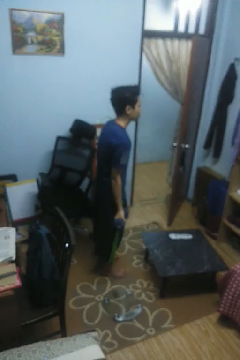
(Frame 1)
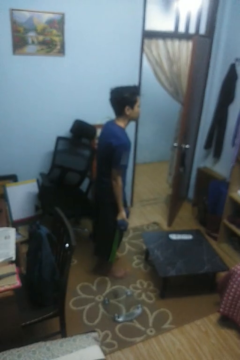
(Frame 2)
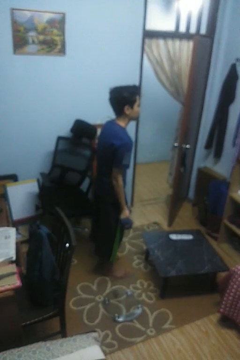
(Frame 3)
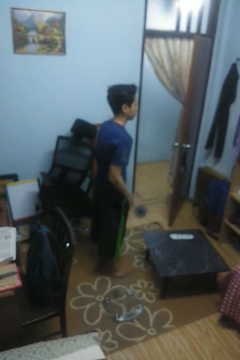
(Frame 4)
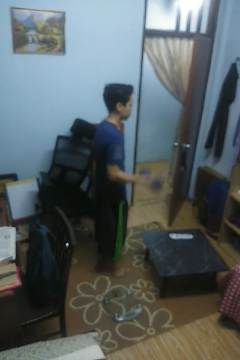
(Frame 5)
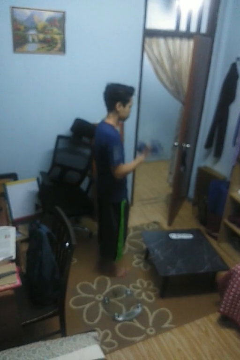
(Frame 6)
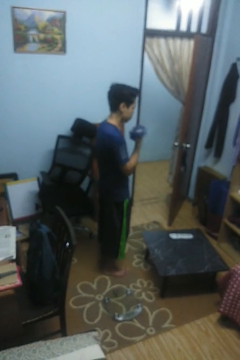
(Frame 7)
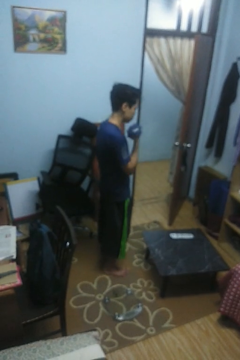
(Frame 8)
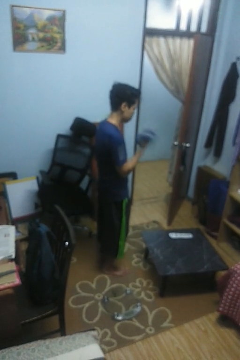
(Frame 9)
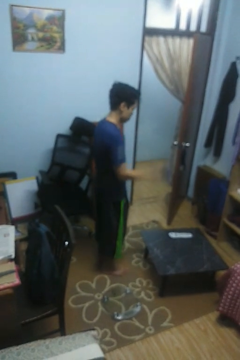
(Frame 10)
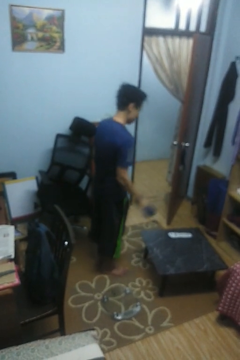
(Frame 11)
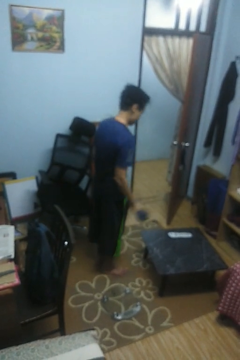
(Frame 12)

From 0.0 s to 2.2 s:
person lifts dumbbells

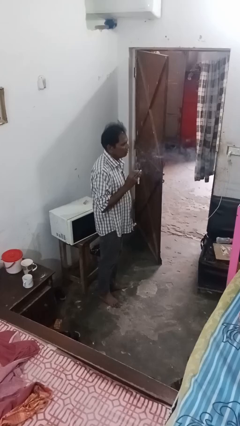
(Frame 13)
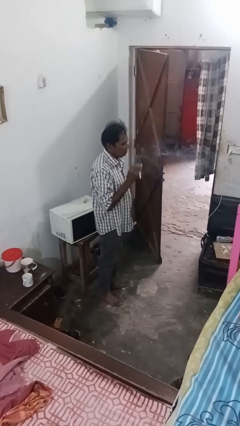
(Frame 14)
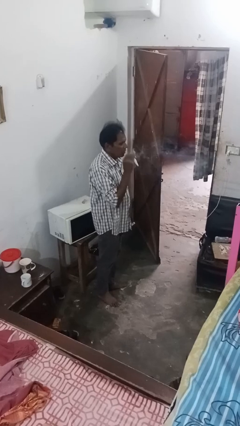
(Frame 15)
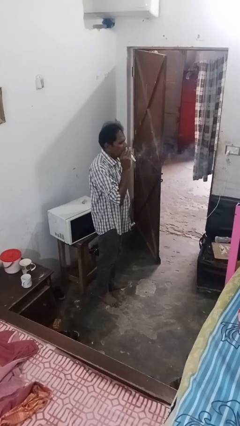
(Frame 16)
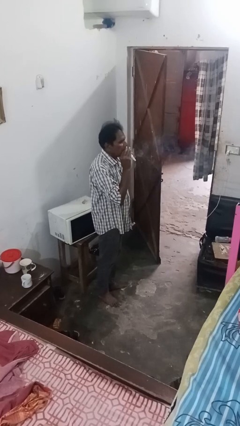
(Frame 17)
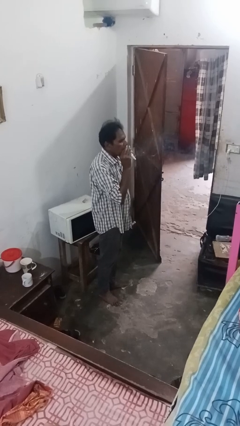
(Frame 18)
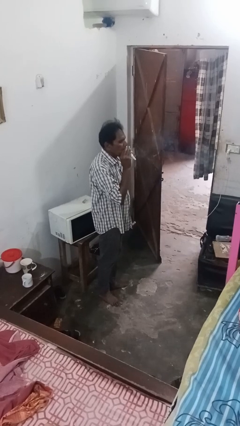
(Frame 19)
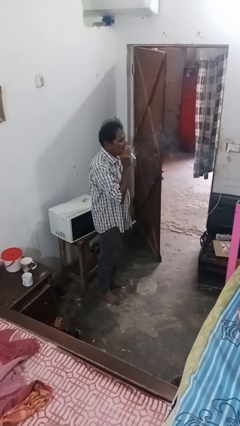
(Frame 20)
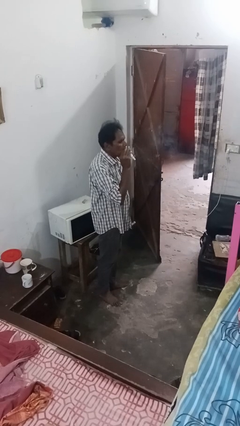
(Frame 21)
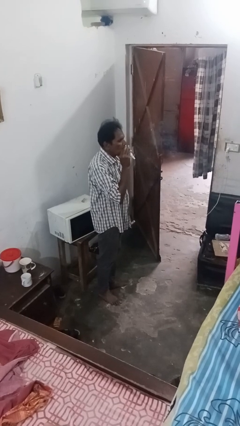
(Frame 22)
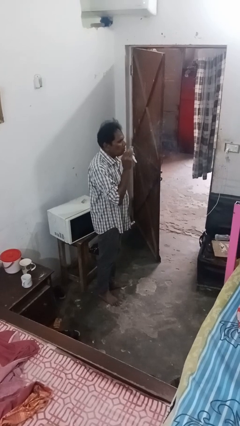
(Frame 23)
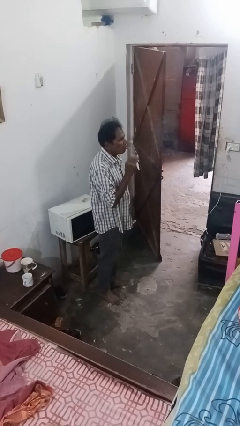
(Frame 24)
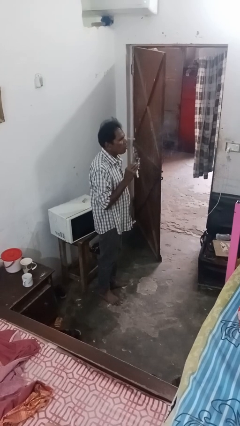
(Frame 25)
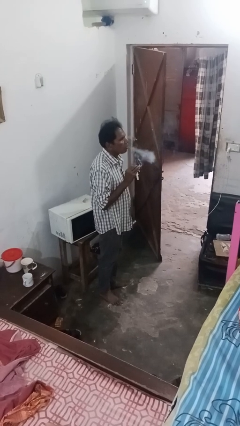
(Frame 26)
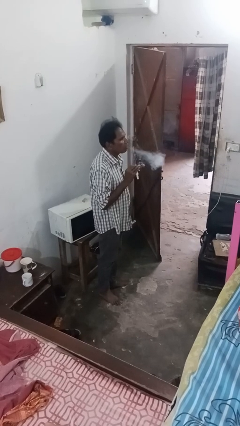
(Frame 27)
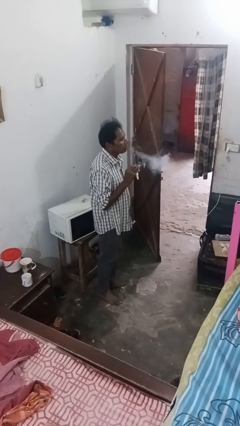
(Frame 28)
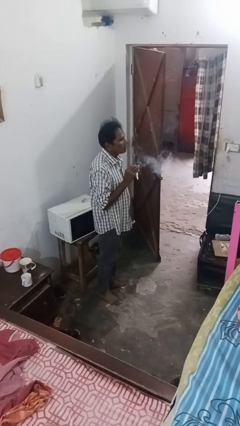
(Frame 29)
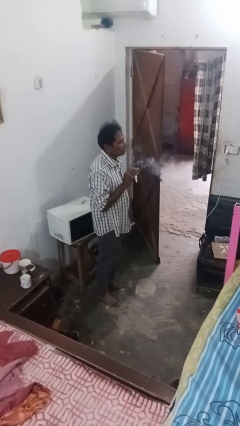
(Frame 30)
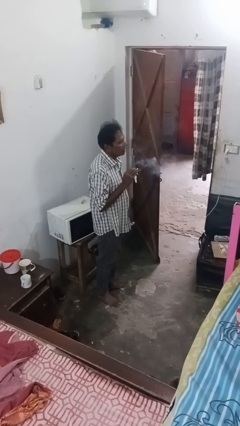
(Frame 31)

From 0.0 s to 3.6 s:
person vapes

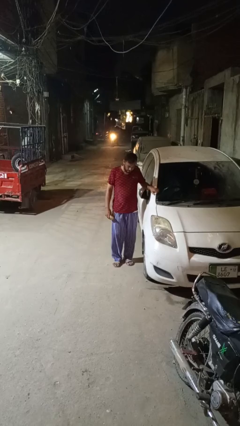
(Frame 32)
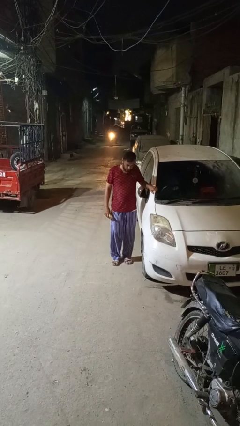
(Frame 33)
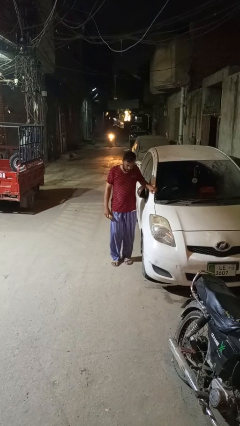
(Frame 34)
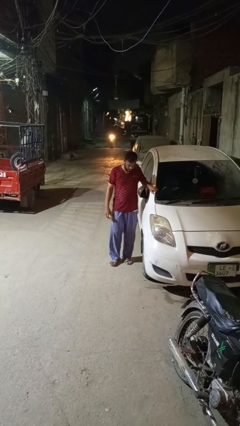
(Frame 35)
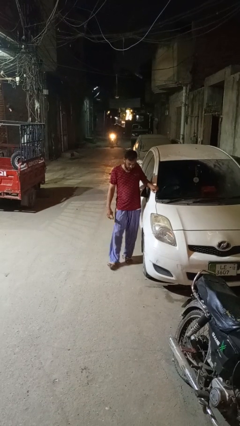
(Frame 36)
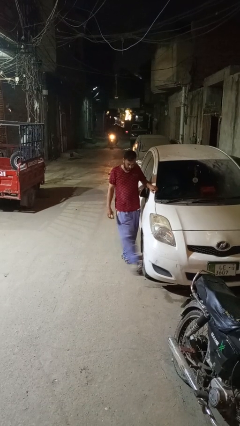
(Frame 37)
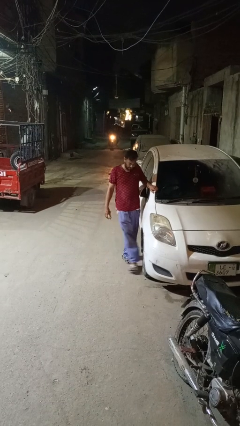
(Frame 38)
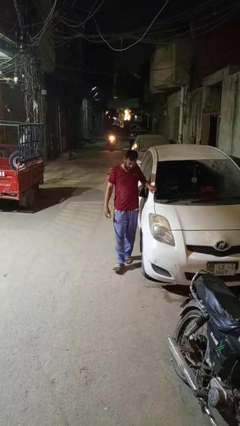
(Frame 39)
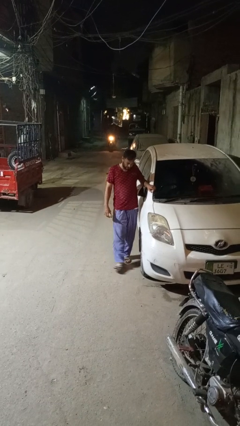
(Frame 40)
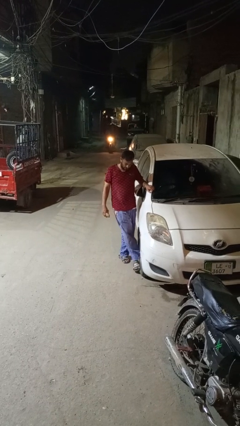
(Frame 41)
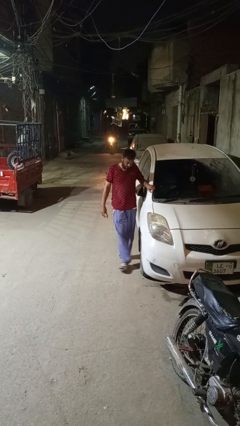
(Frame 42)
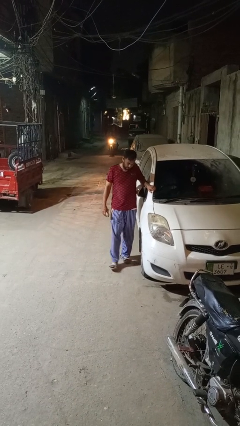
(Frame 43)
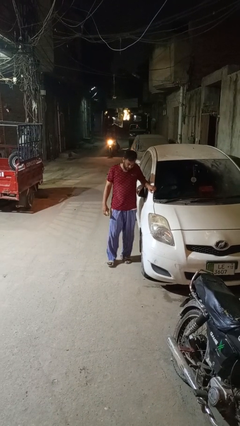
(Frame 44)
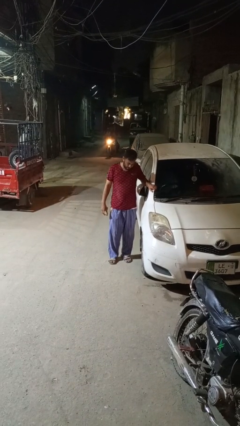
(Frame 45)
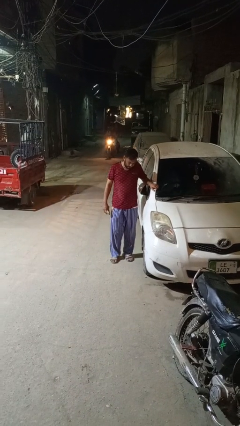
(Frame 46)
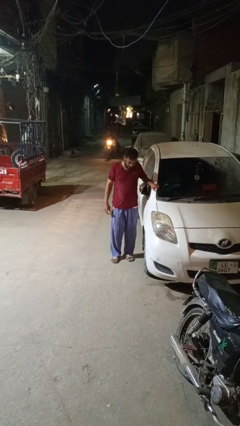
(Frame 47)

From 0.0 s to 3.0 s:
person kicks car tires

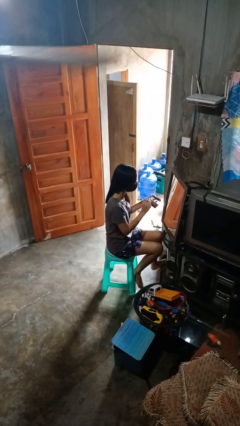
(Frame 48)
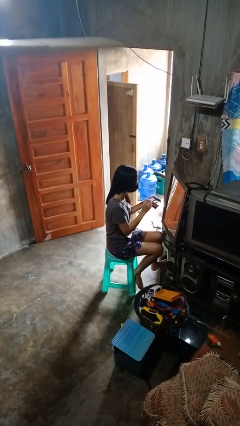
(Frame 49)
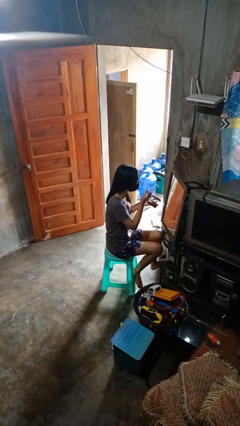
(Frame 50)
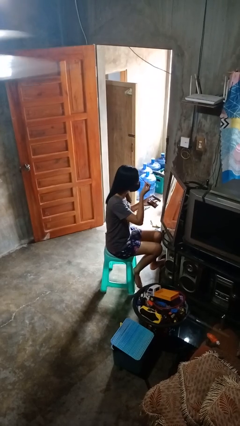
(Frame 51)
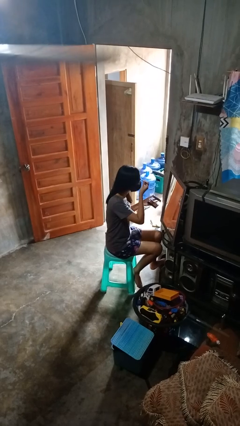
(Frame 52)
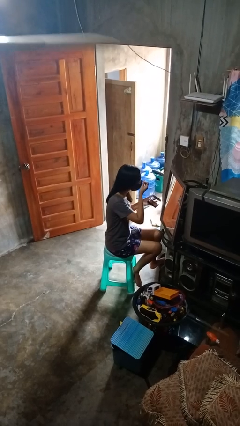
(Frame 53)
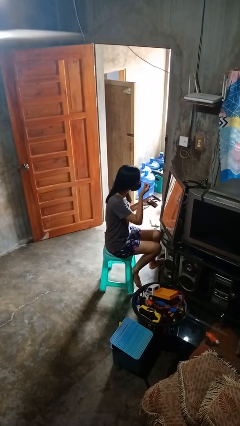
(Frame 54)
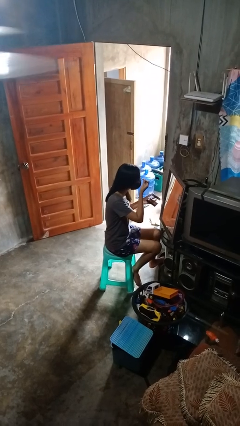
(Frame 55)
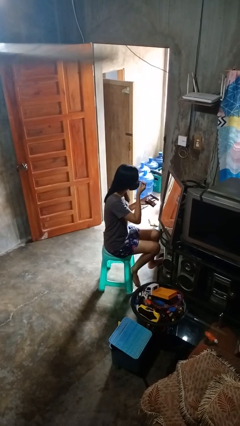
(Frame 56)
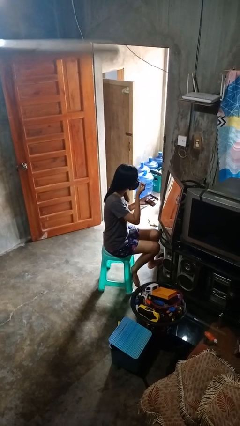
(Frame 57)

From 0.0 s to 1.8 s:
person applies eye makeup

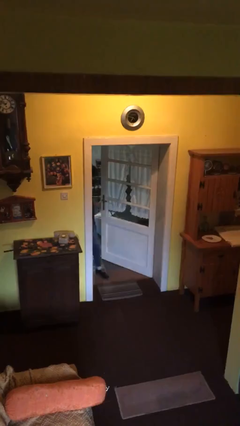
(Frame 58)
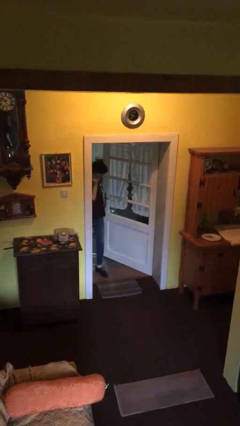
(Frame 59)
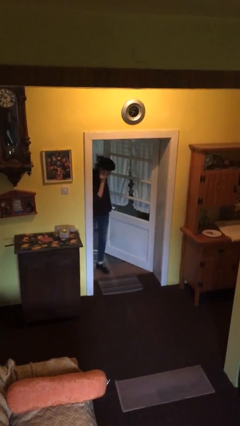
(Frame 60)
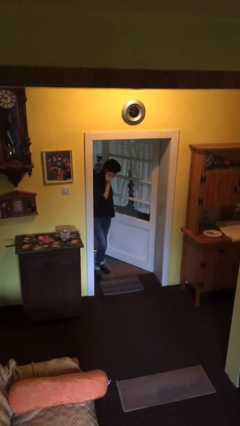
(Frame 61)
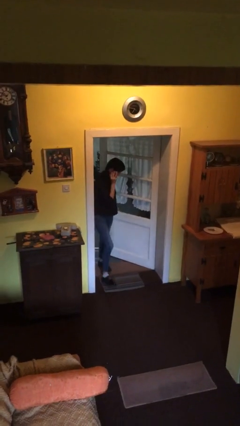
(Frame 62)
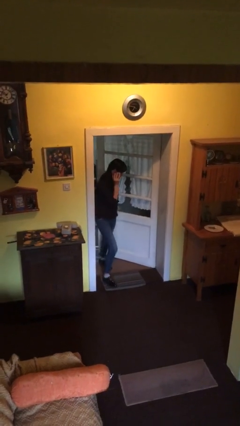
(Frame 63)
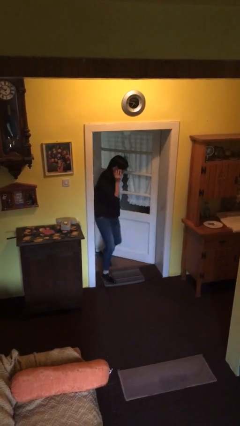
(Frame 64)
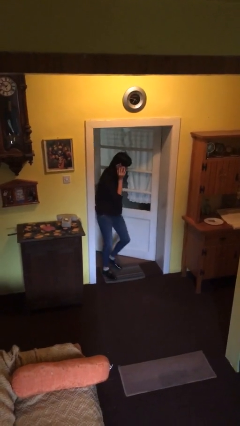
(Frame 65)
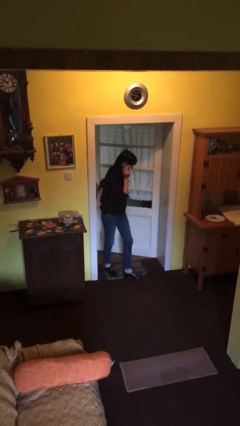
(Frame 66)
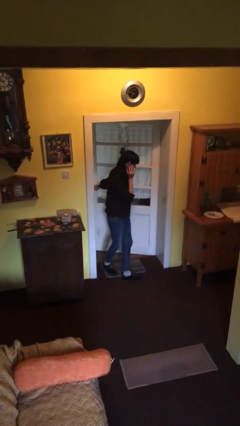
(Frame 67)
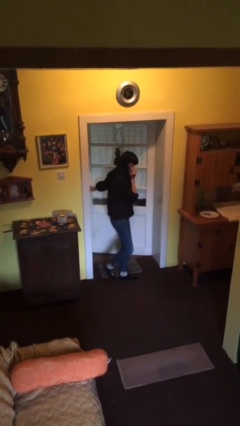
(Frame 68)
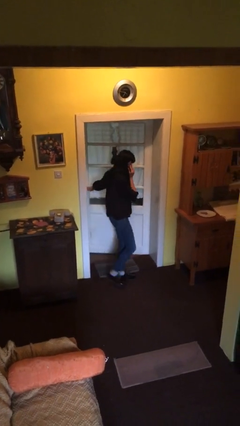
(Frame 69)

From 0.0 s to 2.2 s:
person enters scene through structure

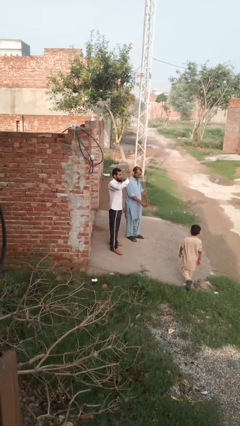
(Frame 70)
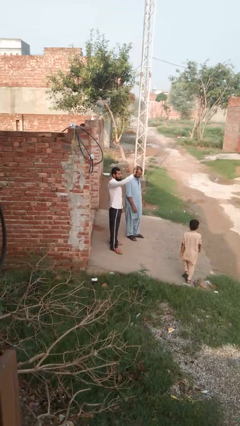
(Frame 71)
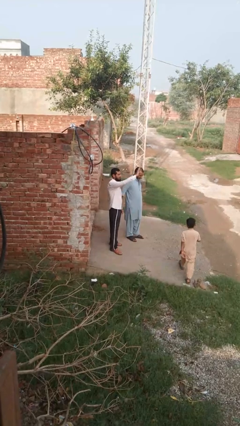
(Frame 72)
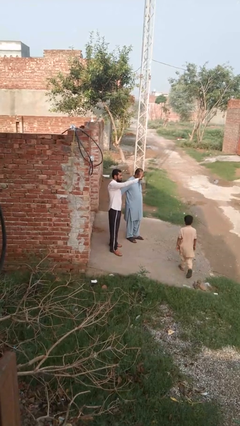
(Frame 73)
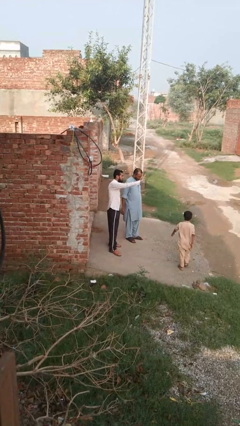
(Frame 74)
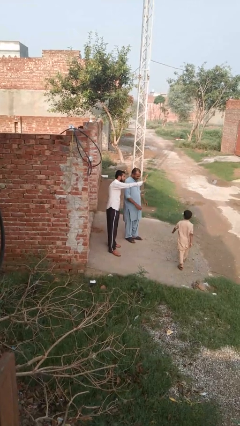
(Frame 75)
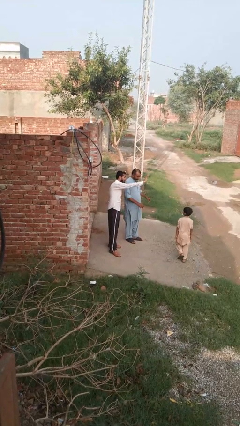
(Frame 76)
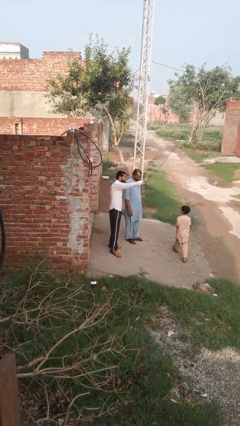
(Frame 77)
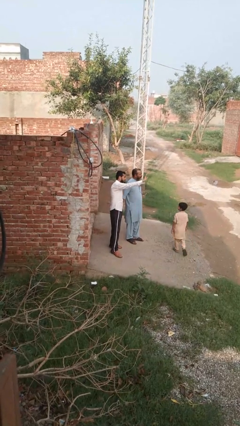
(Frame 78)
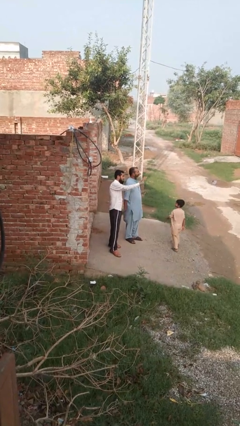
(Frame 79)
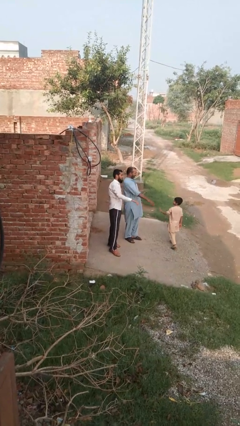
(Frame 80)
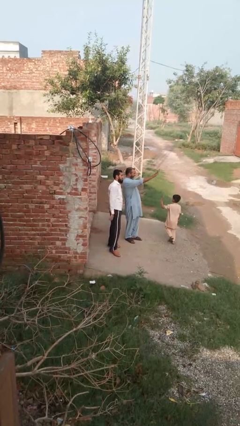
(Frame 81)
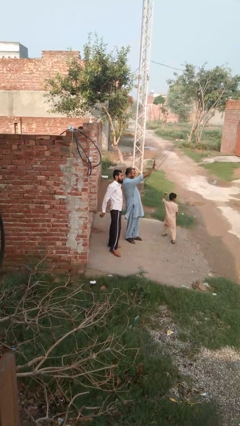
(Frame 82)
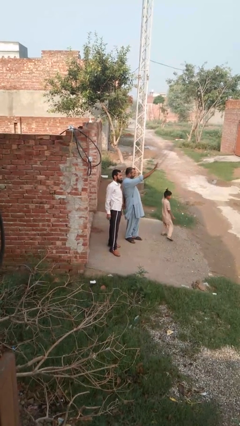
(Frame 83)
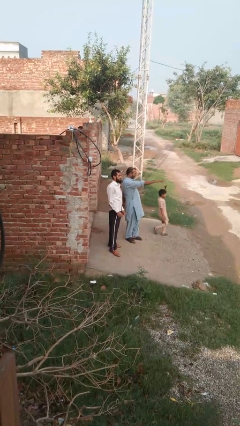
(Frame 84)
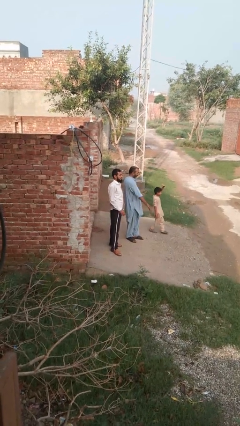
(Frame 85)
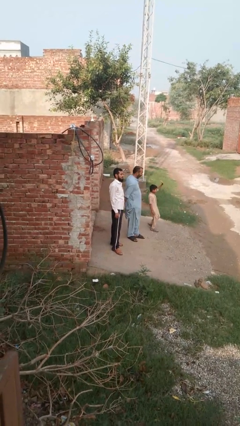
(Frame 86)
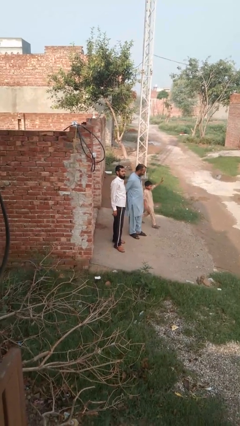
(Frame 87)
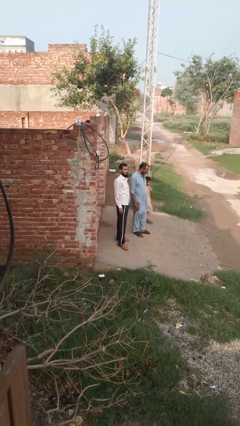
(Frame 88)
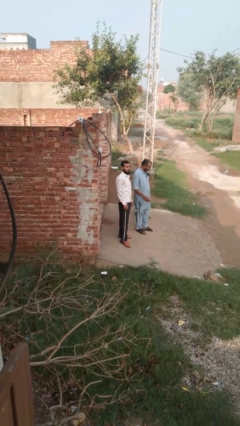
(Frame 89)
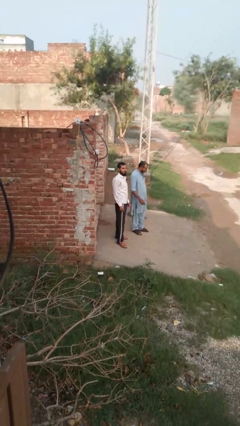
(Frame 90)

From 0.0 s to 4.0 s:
person waves at person

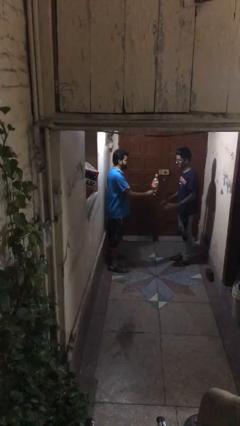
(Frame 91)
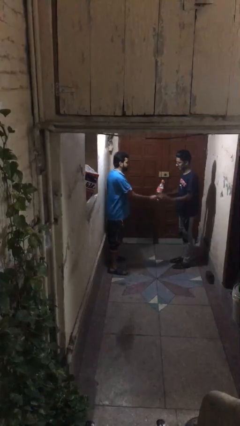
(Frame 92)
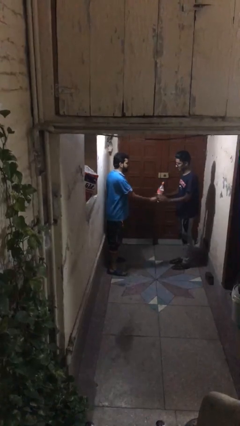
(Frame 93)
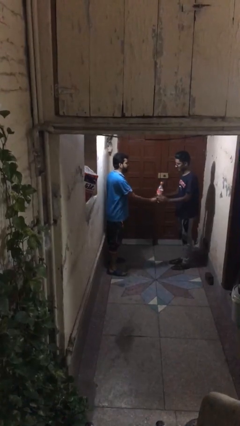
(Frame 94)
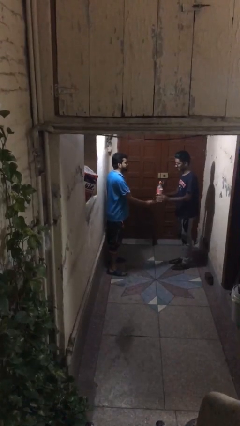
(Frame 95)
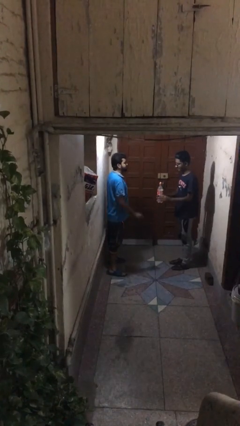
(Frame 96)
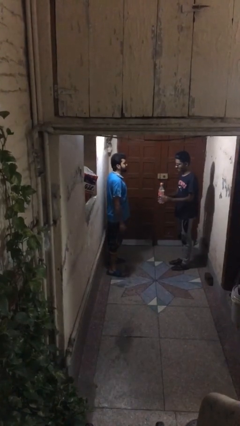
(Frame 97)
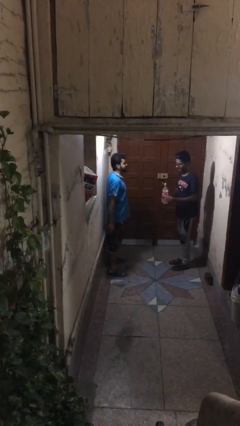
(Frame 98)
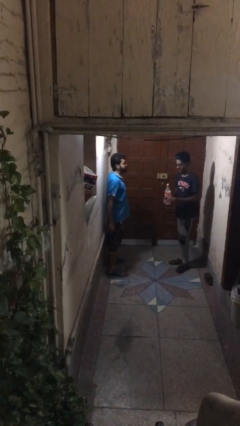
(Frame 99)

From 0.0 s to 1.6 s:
person transfers object to person
